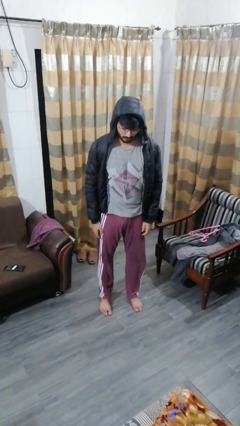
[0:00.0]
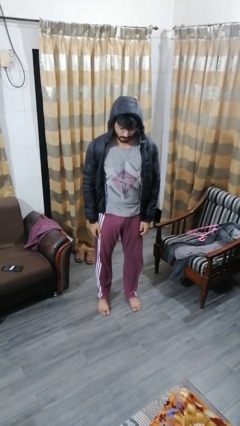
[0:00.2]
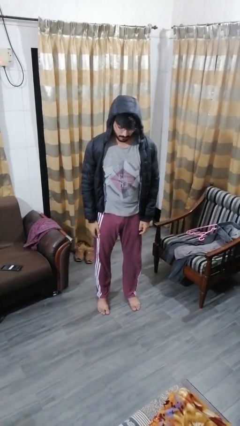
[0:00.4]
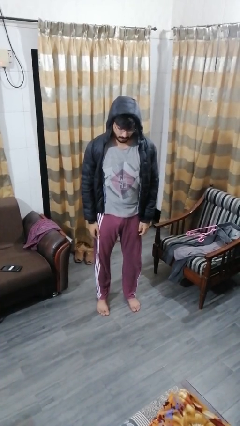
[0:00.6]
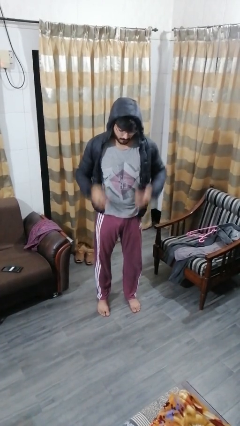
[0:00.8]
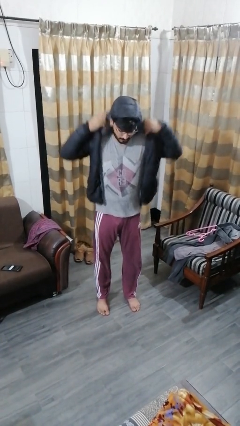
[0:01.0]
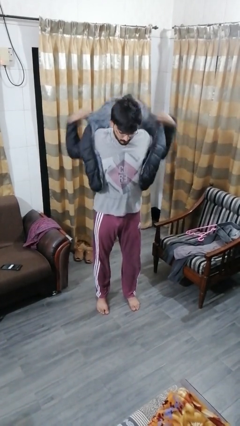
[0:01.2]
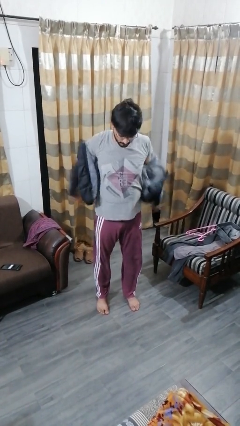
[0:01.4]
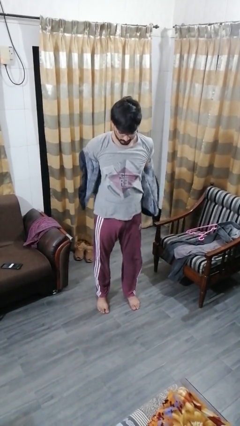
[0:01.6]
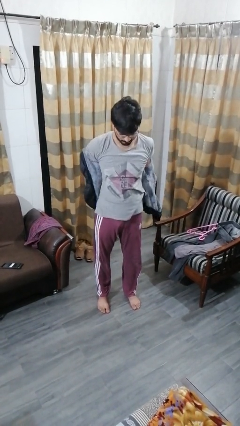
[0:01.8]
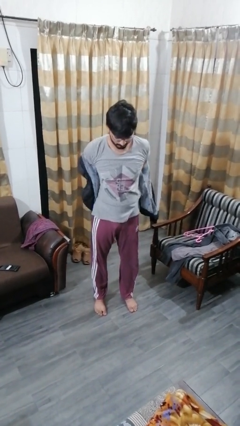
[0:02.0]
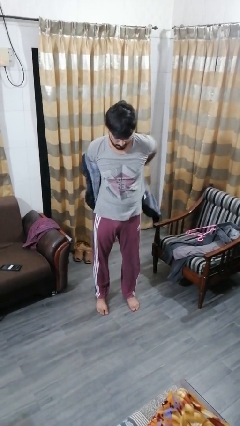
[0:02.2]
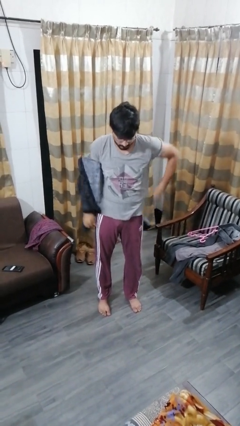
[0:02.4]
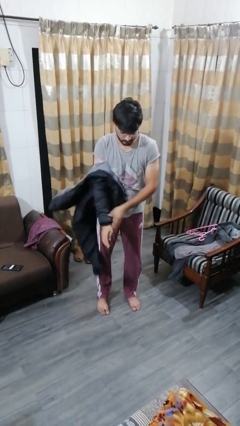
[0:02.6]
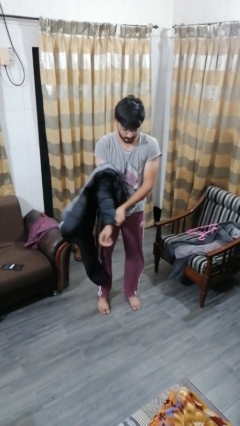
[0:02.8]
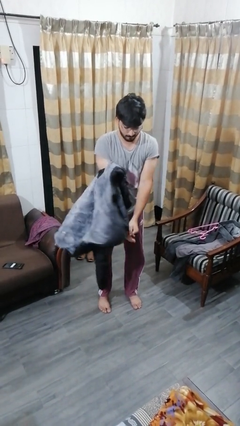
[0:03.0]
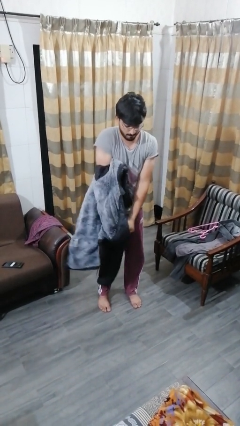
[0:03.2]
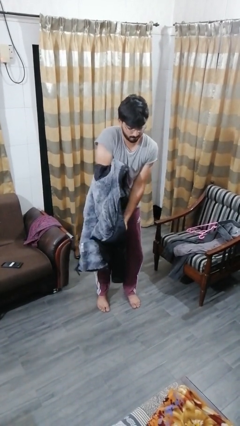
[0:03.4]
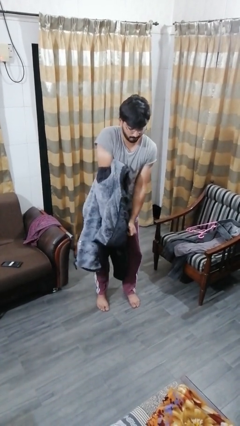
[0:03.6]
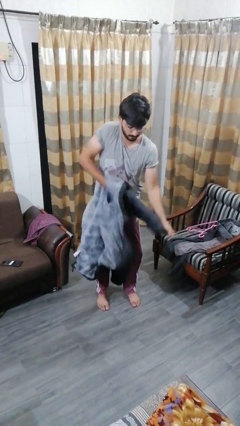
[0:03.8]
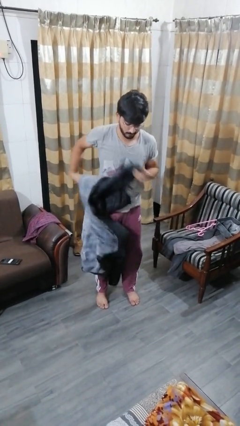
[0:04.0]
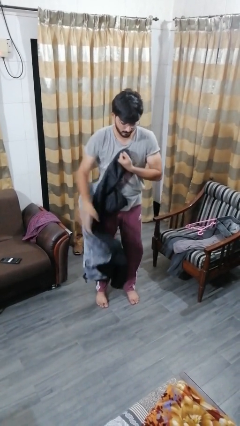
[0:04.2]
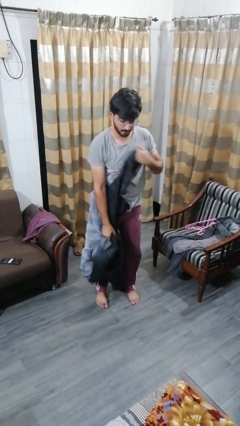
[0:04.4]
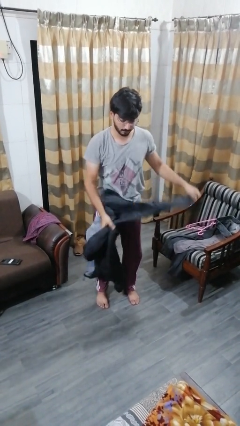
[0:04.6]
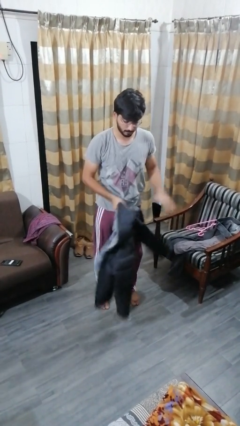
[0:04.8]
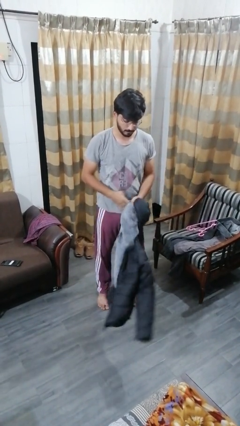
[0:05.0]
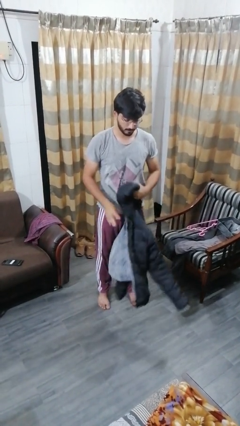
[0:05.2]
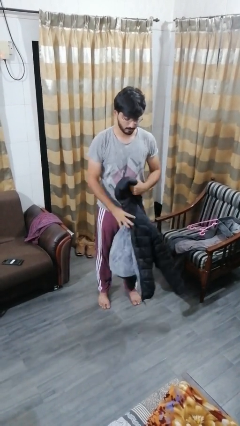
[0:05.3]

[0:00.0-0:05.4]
person takes off hoodie

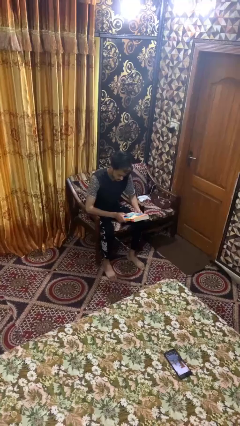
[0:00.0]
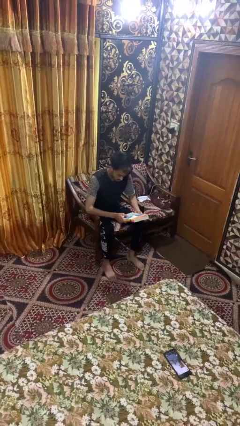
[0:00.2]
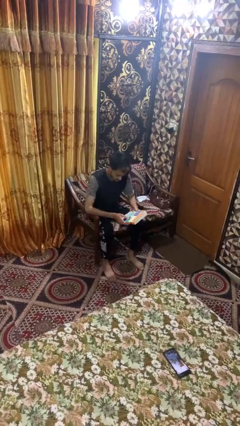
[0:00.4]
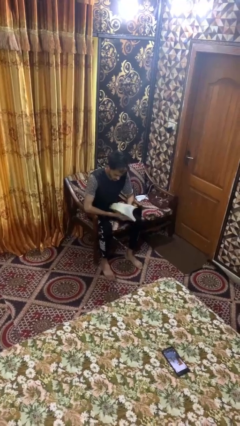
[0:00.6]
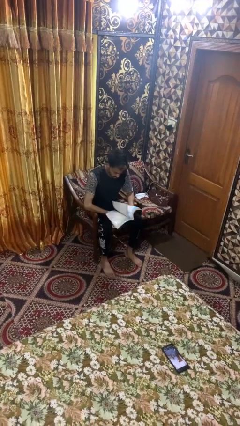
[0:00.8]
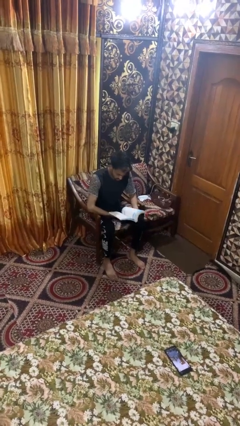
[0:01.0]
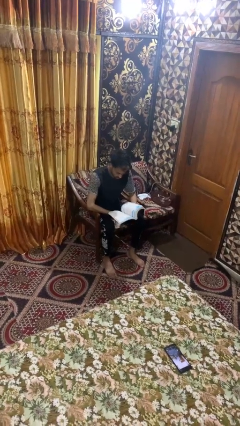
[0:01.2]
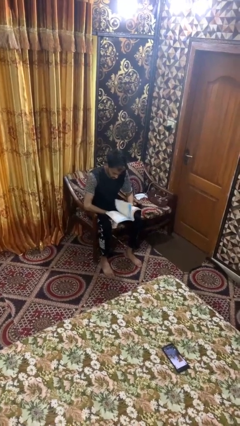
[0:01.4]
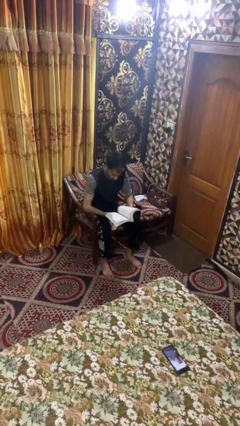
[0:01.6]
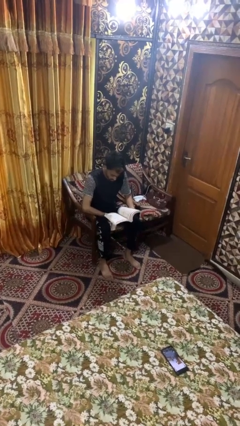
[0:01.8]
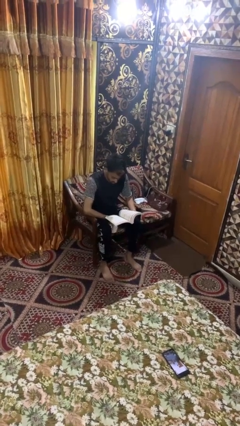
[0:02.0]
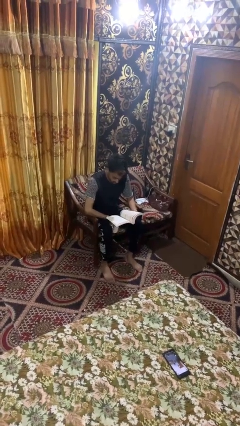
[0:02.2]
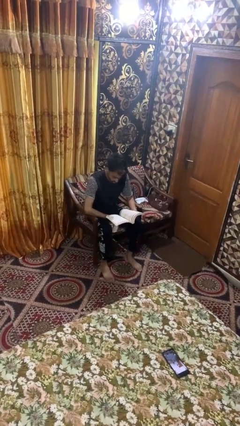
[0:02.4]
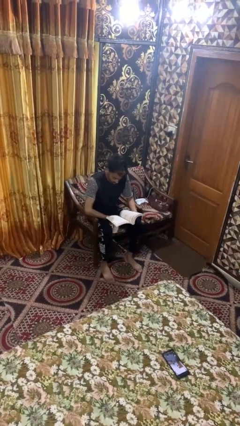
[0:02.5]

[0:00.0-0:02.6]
person reads book

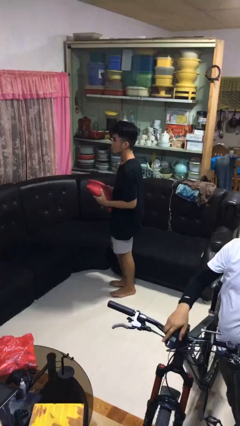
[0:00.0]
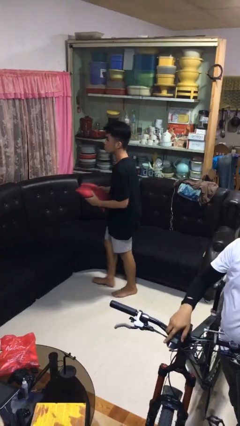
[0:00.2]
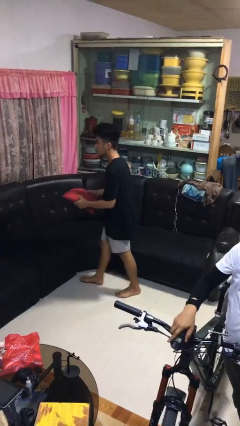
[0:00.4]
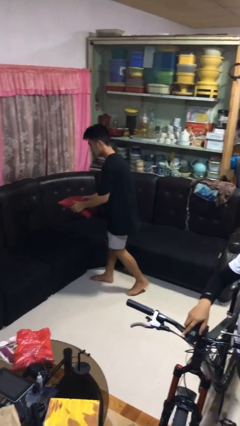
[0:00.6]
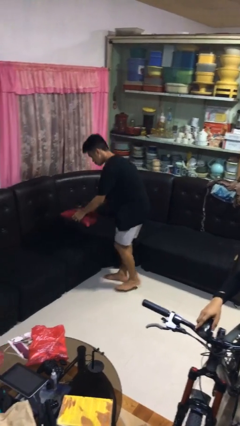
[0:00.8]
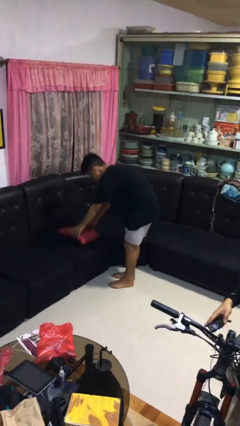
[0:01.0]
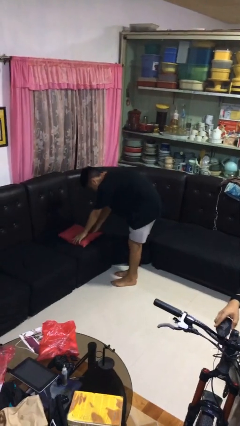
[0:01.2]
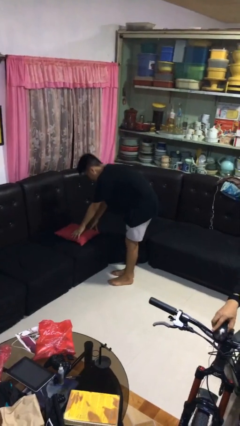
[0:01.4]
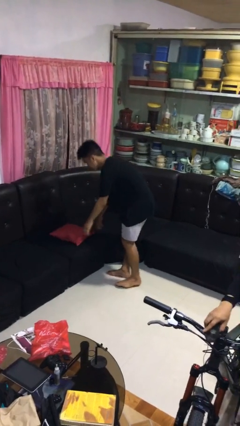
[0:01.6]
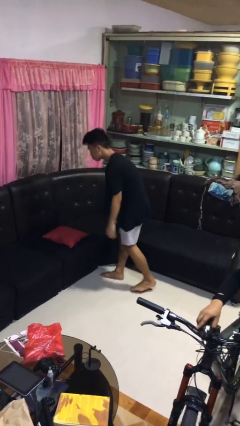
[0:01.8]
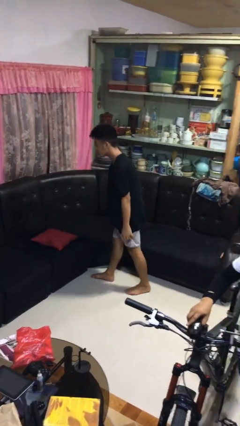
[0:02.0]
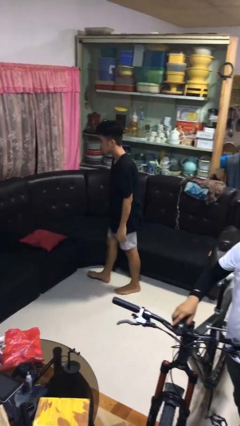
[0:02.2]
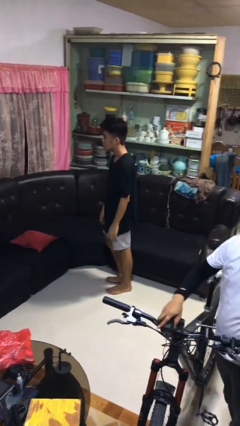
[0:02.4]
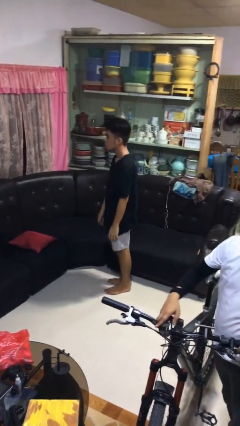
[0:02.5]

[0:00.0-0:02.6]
person puts down object on couch

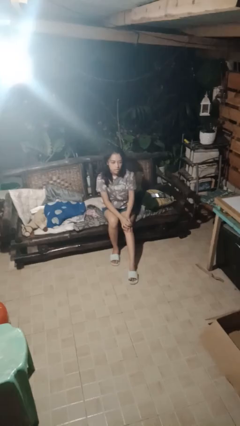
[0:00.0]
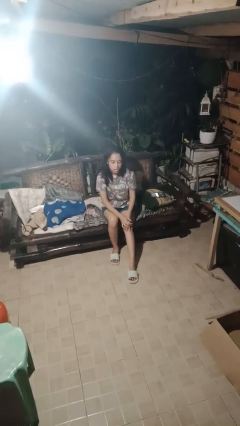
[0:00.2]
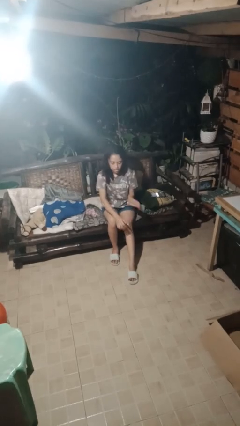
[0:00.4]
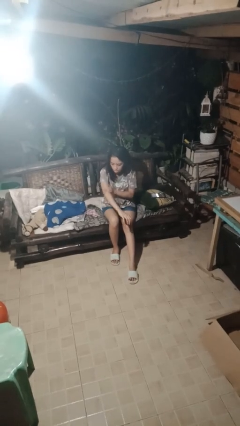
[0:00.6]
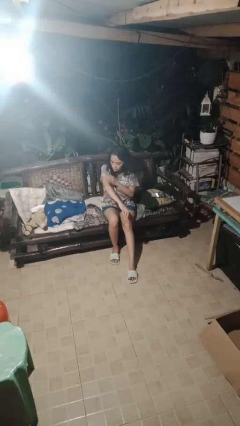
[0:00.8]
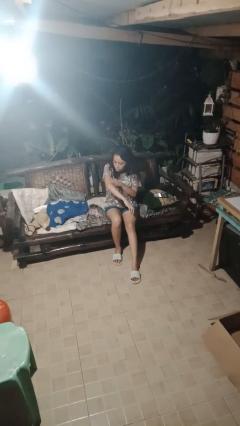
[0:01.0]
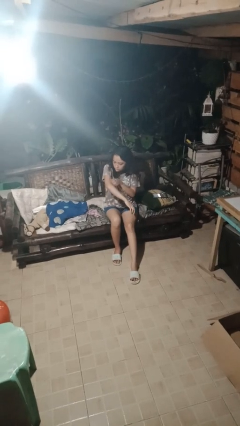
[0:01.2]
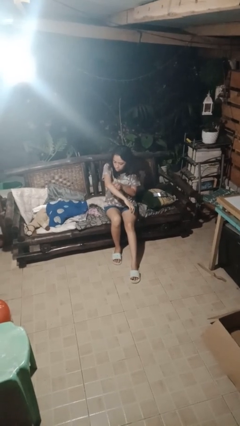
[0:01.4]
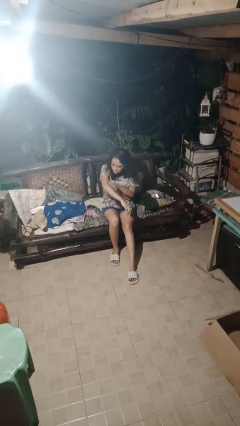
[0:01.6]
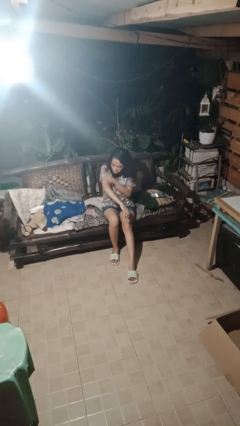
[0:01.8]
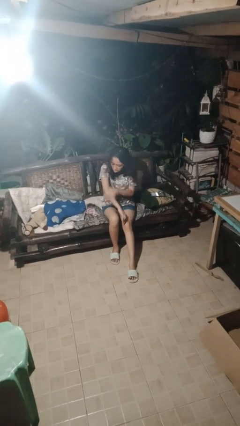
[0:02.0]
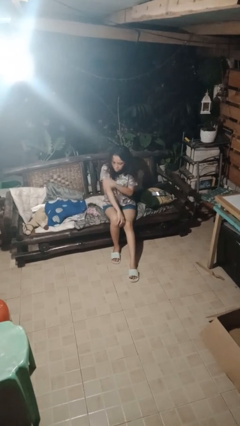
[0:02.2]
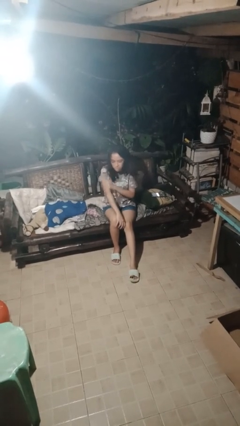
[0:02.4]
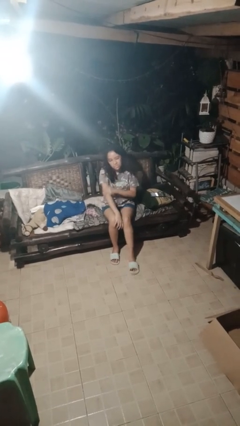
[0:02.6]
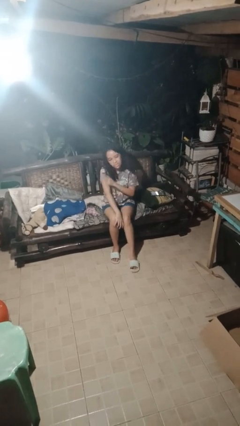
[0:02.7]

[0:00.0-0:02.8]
person swats bug

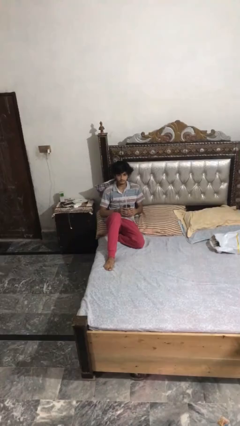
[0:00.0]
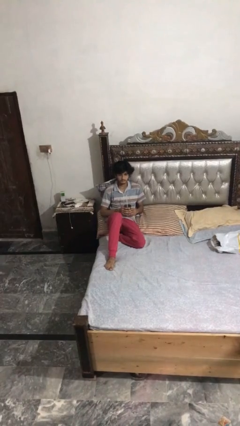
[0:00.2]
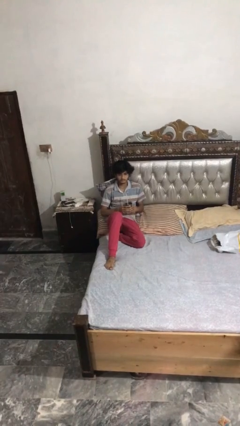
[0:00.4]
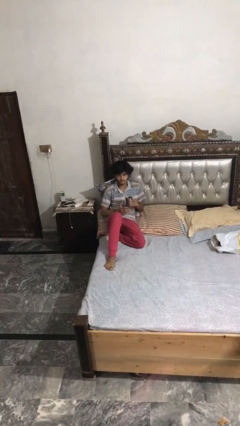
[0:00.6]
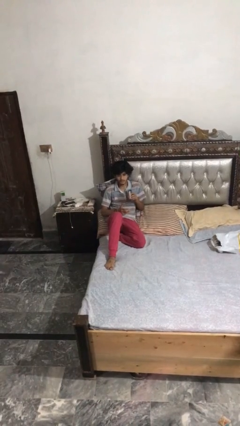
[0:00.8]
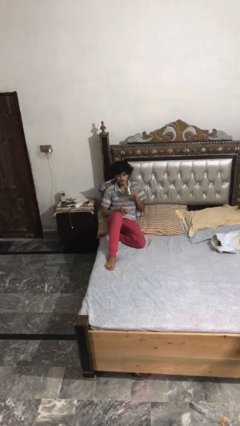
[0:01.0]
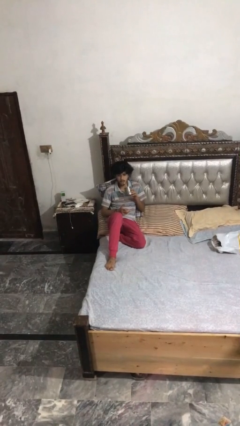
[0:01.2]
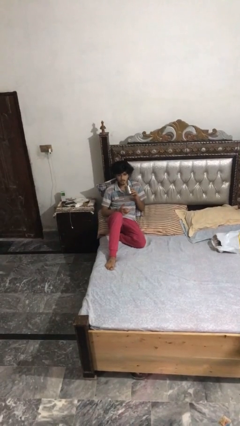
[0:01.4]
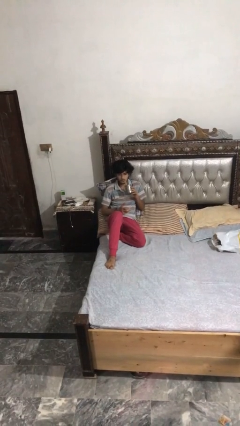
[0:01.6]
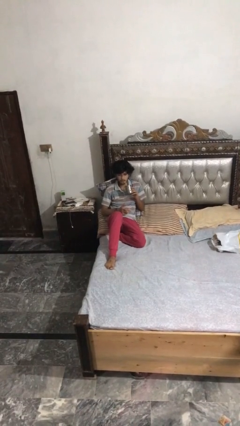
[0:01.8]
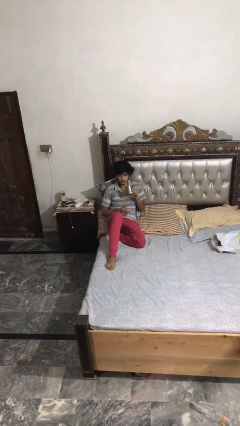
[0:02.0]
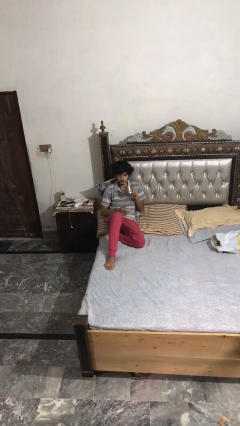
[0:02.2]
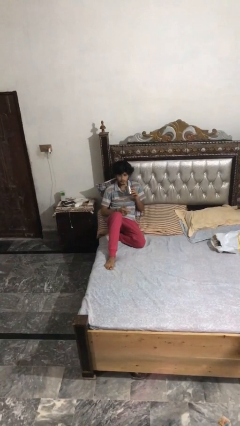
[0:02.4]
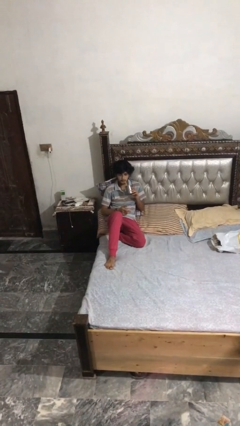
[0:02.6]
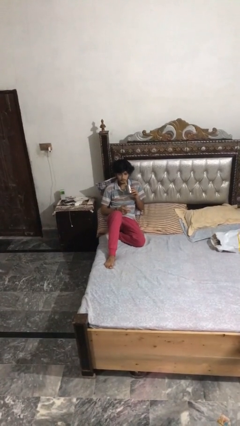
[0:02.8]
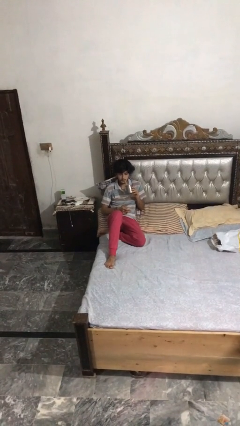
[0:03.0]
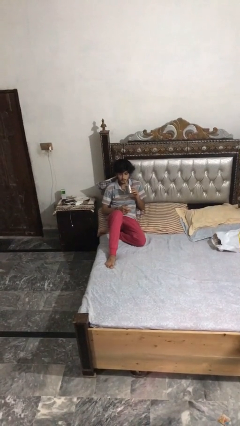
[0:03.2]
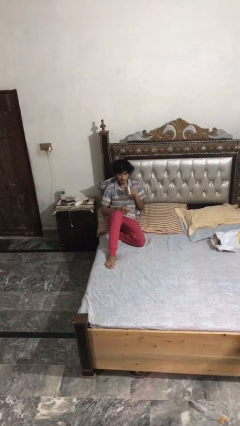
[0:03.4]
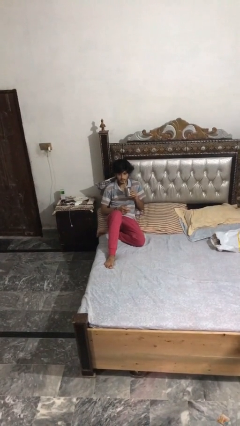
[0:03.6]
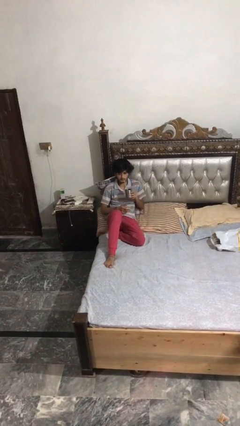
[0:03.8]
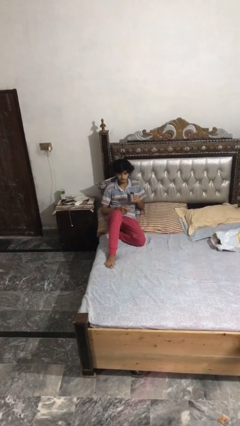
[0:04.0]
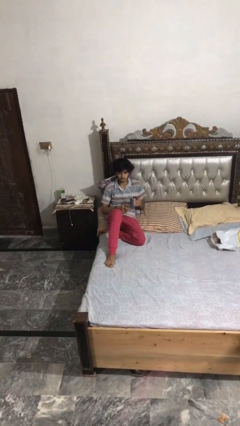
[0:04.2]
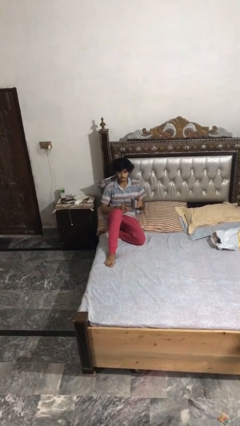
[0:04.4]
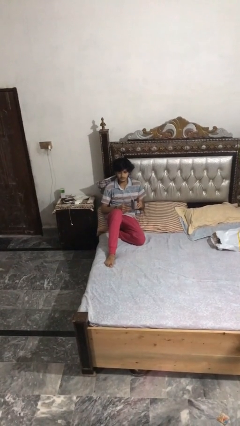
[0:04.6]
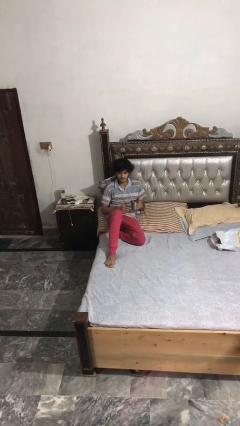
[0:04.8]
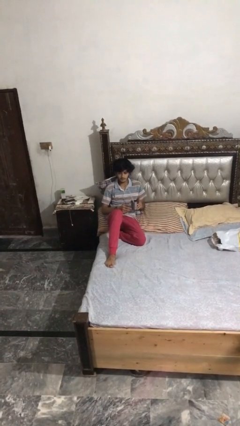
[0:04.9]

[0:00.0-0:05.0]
person drinks from straw
